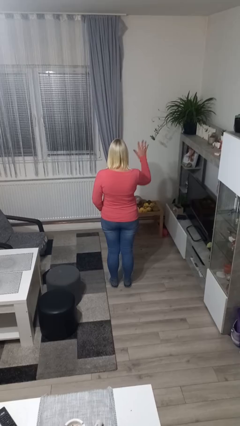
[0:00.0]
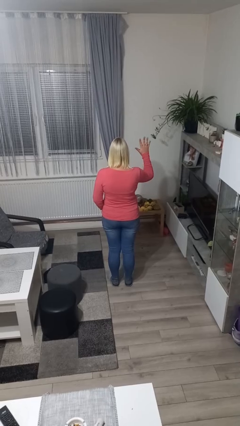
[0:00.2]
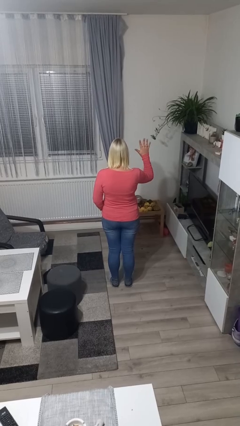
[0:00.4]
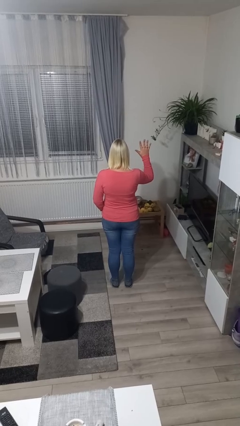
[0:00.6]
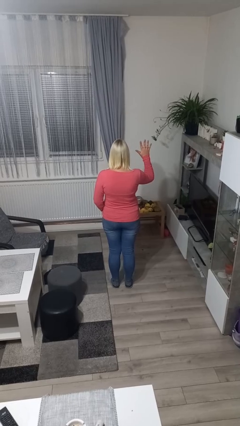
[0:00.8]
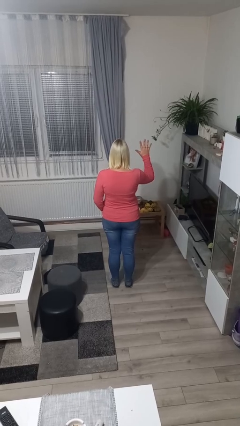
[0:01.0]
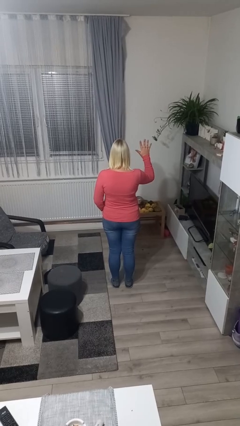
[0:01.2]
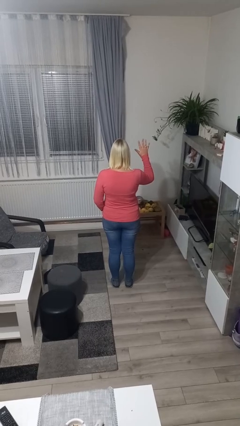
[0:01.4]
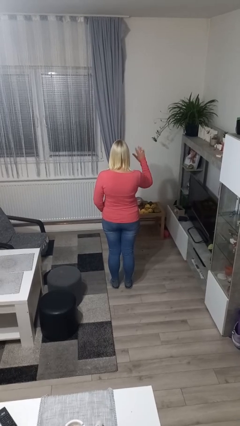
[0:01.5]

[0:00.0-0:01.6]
person gestures number five

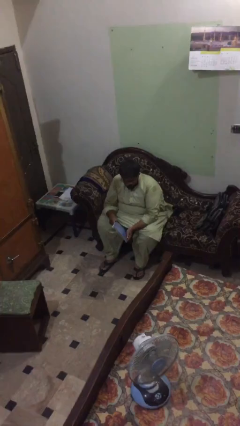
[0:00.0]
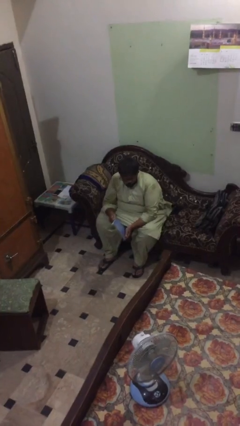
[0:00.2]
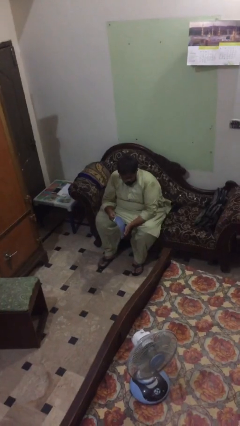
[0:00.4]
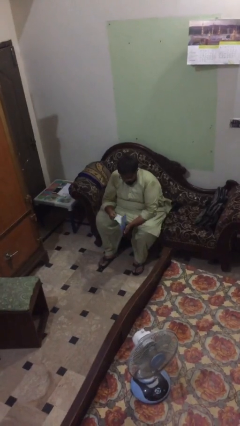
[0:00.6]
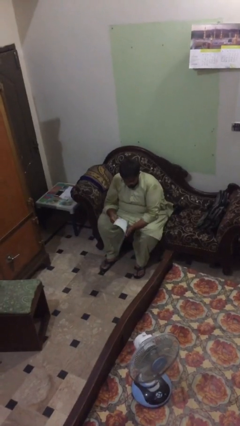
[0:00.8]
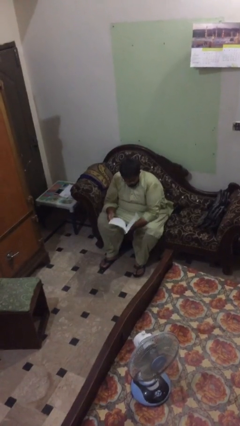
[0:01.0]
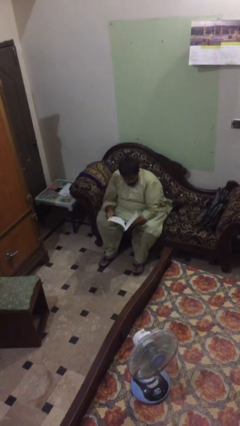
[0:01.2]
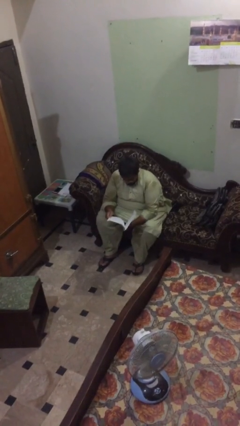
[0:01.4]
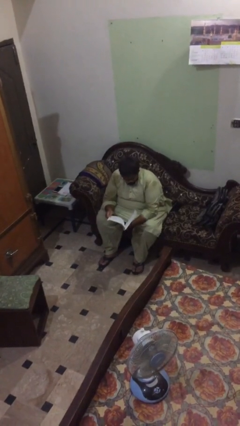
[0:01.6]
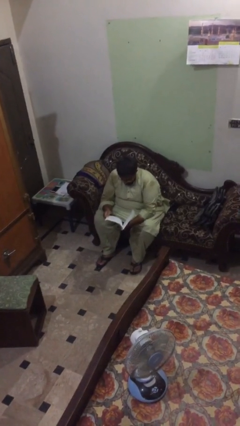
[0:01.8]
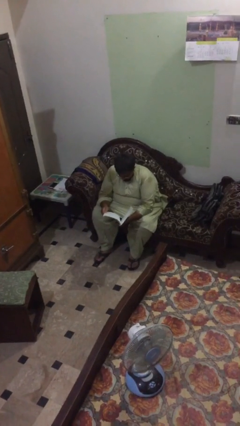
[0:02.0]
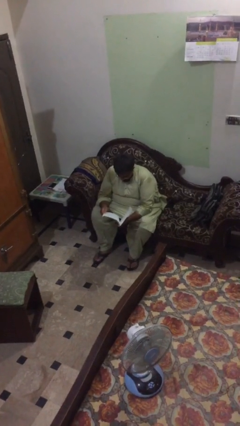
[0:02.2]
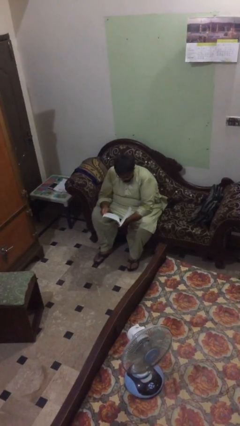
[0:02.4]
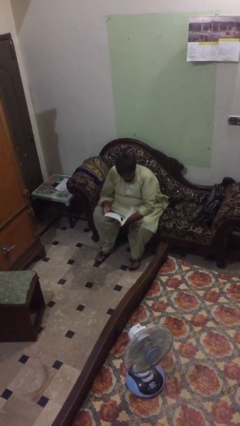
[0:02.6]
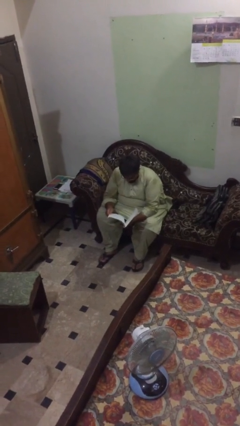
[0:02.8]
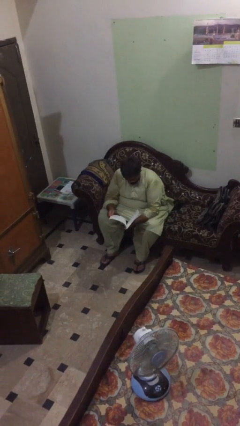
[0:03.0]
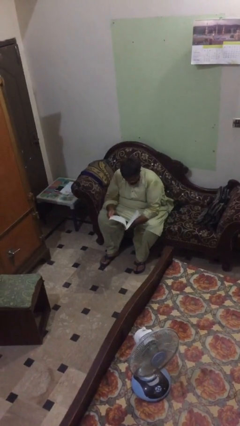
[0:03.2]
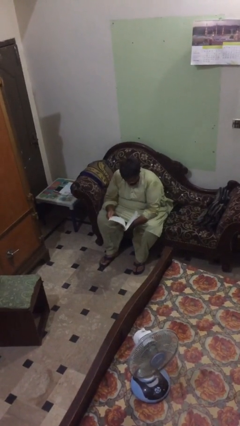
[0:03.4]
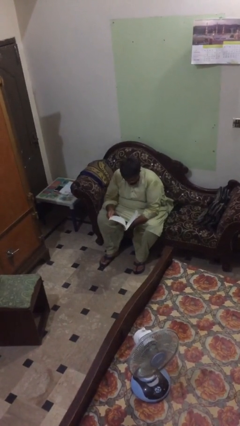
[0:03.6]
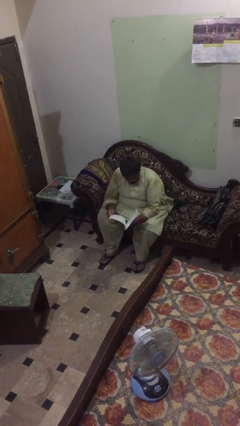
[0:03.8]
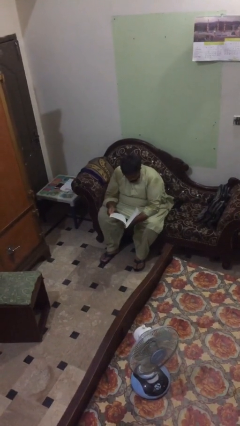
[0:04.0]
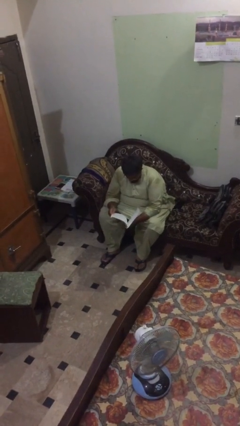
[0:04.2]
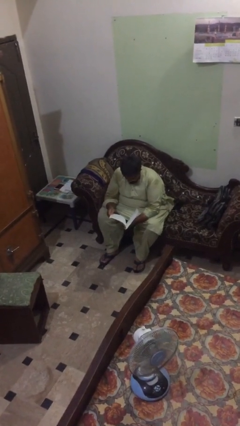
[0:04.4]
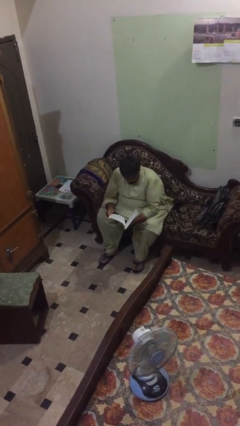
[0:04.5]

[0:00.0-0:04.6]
person talks on phone

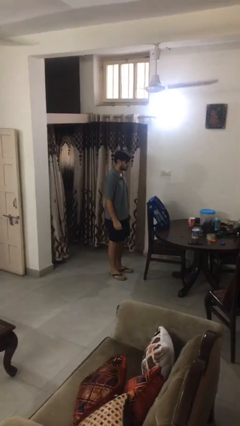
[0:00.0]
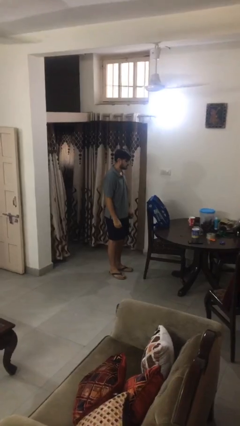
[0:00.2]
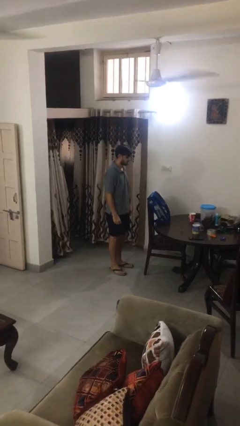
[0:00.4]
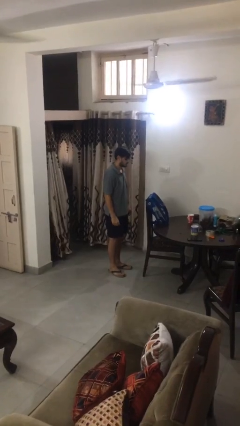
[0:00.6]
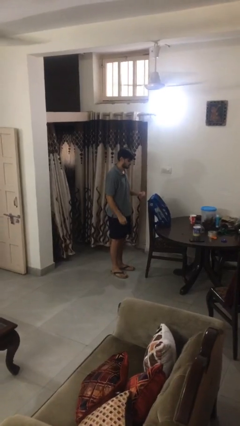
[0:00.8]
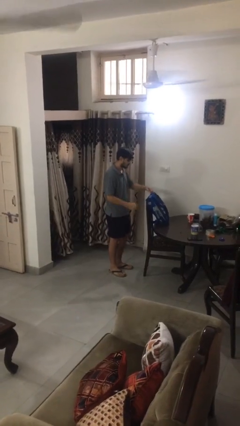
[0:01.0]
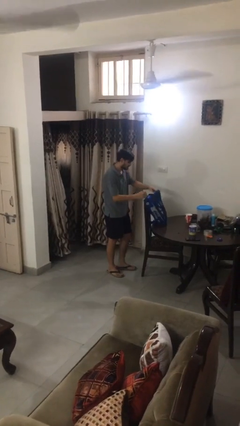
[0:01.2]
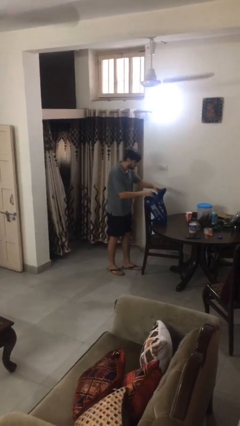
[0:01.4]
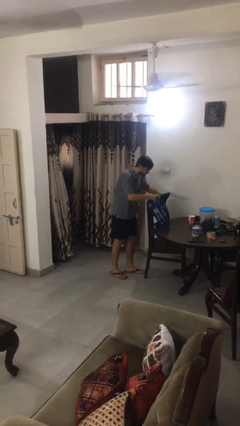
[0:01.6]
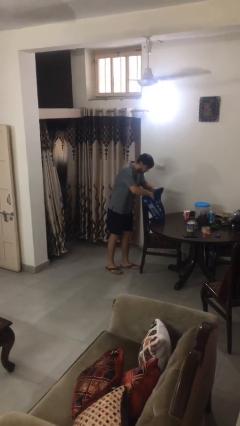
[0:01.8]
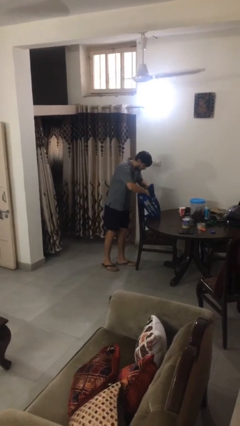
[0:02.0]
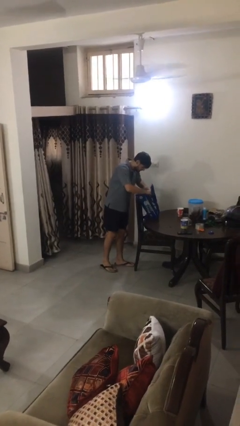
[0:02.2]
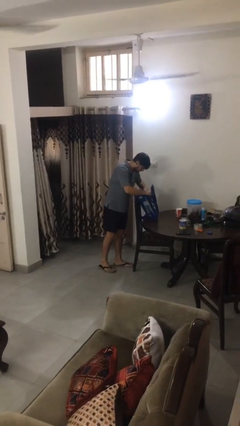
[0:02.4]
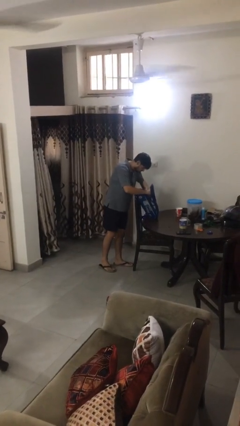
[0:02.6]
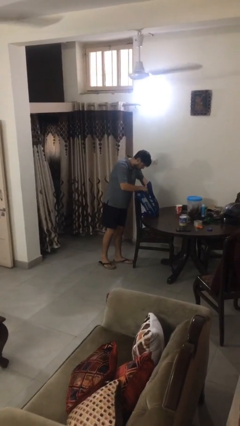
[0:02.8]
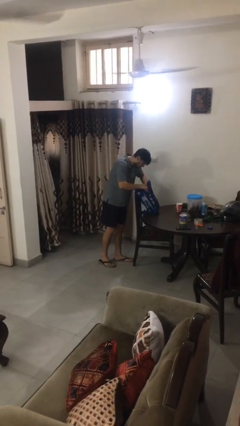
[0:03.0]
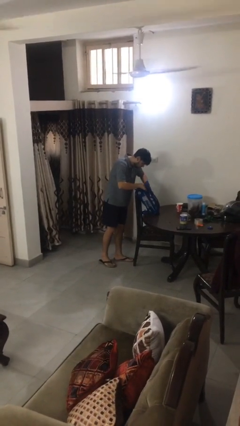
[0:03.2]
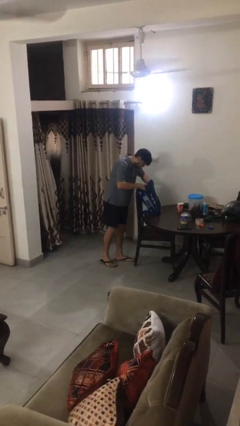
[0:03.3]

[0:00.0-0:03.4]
person searches in backpack

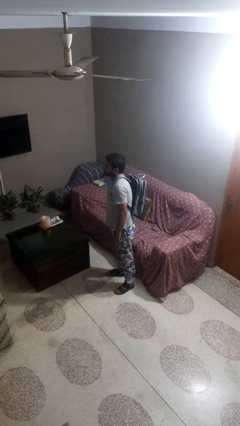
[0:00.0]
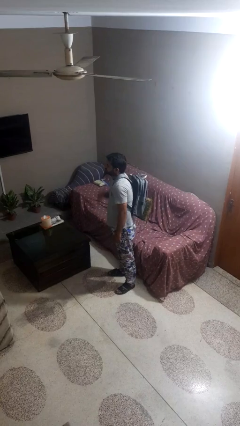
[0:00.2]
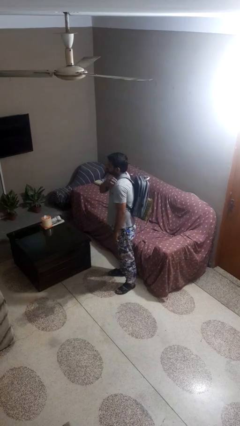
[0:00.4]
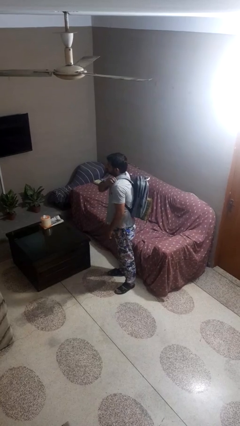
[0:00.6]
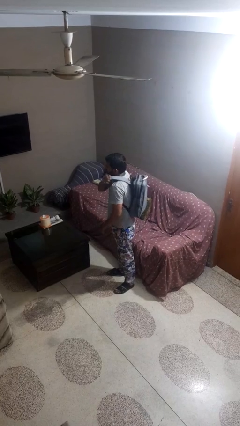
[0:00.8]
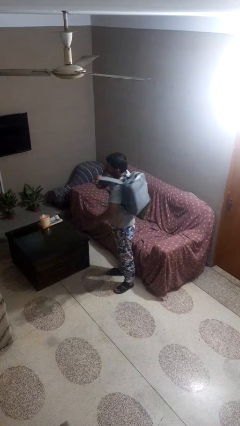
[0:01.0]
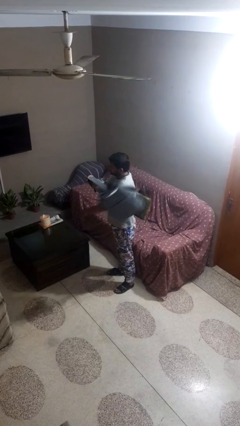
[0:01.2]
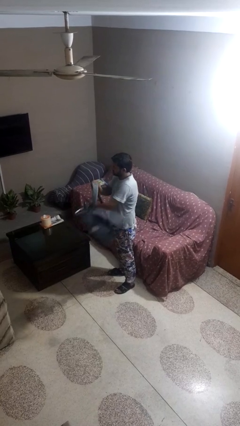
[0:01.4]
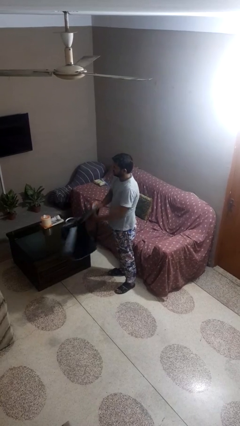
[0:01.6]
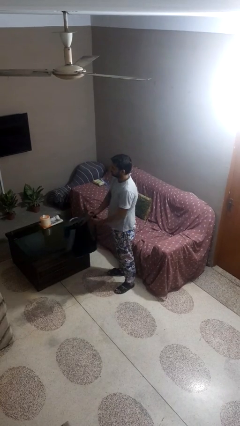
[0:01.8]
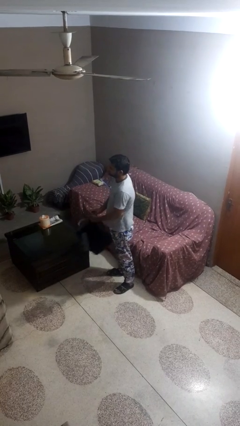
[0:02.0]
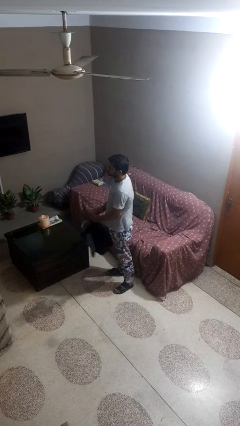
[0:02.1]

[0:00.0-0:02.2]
person takes off backpack

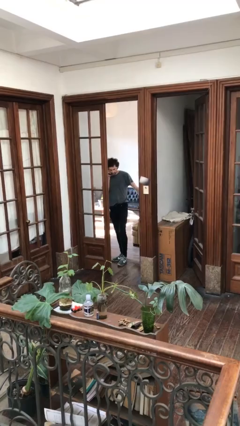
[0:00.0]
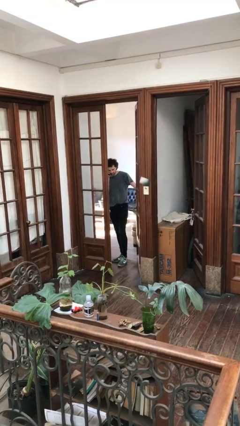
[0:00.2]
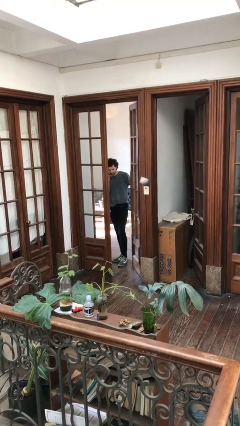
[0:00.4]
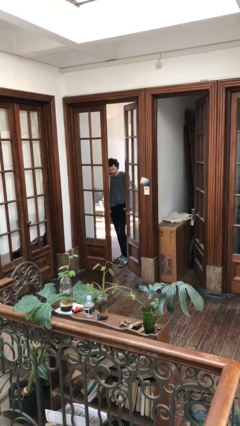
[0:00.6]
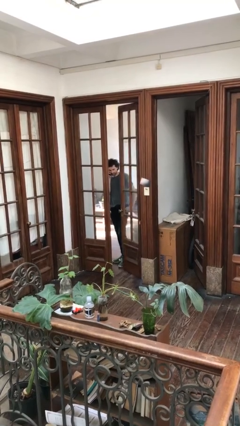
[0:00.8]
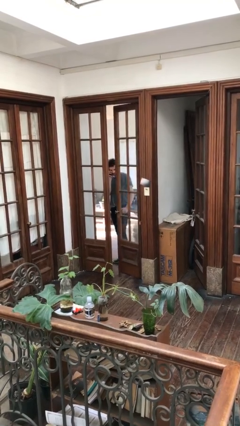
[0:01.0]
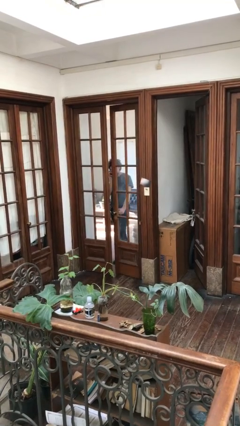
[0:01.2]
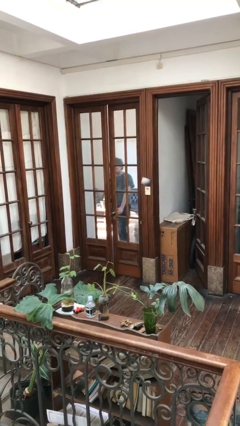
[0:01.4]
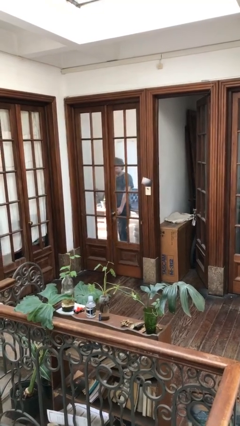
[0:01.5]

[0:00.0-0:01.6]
person closes facility door

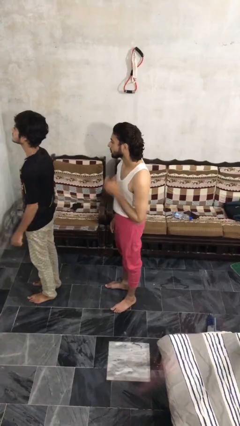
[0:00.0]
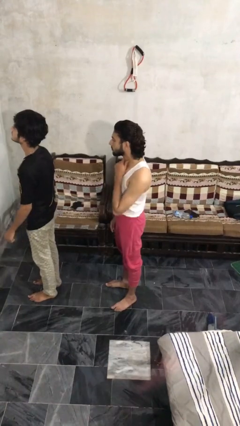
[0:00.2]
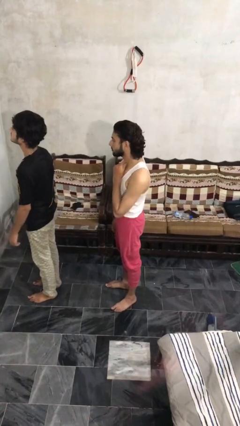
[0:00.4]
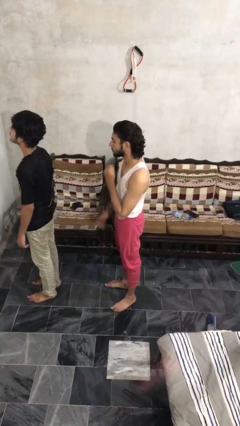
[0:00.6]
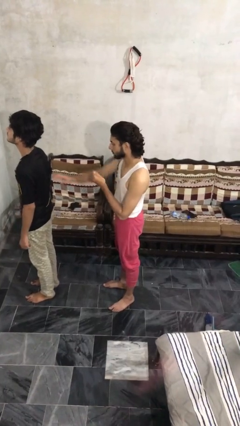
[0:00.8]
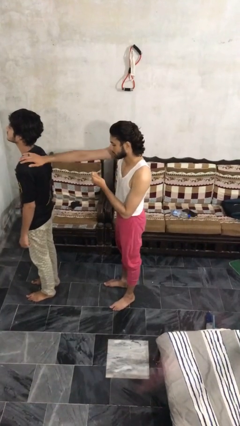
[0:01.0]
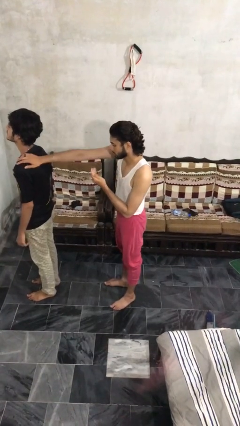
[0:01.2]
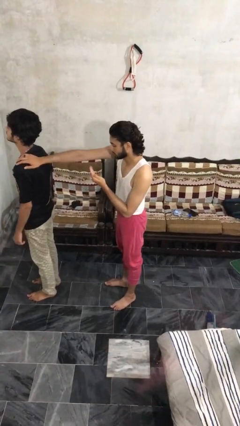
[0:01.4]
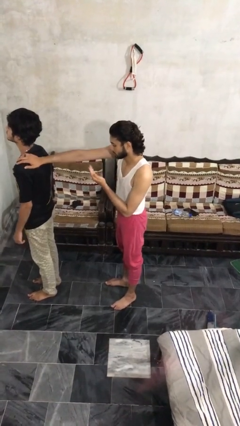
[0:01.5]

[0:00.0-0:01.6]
person grabs person by shoulder

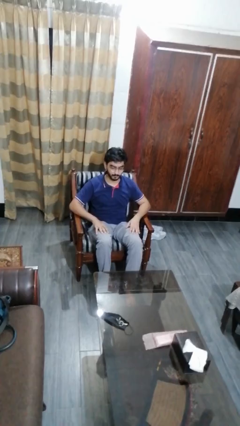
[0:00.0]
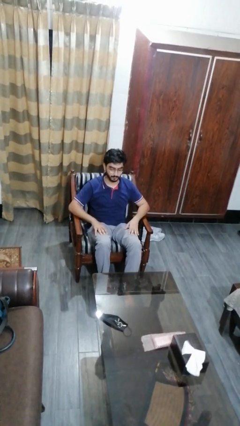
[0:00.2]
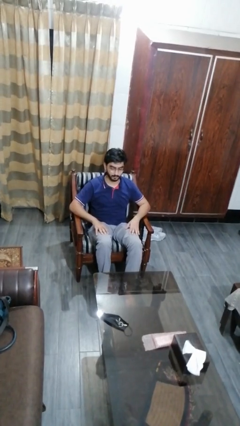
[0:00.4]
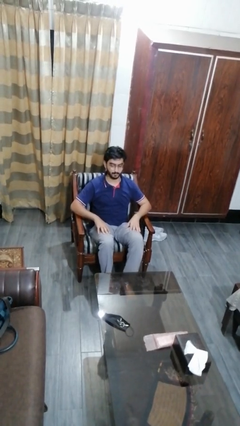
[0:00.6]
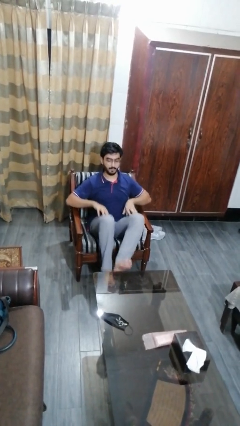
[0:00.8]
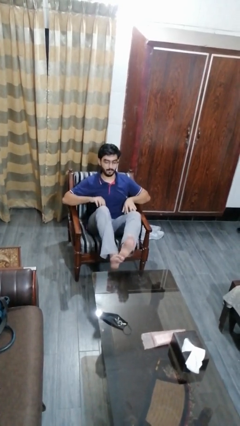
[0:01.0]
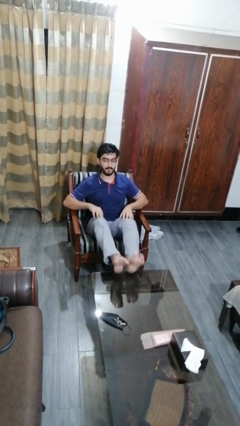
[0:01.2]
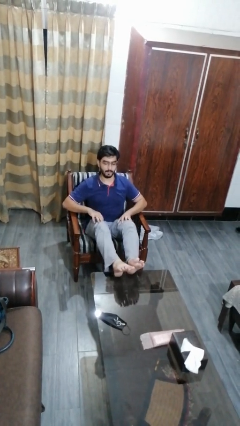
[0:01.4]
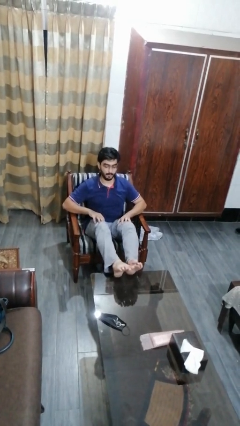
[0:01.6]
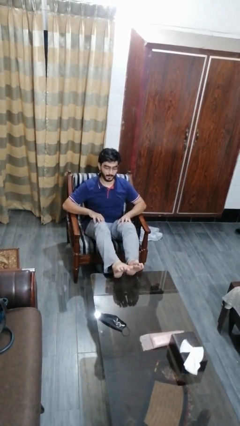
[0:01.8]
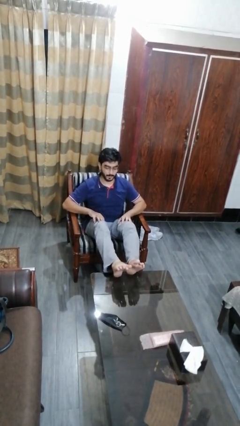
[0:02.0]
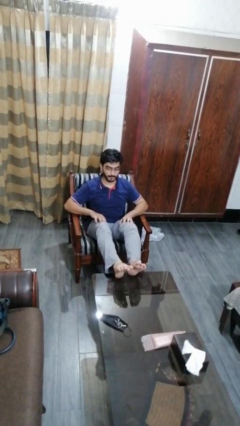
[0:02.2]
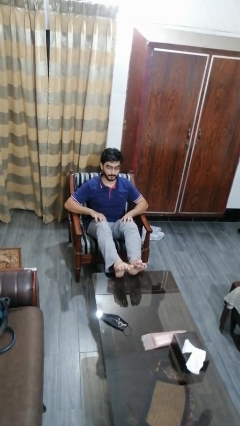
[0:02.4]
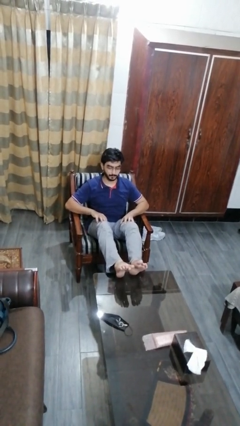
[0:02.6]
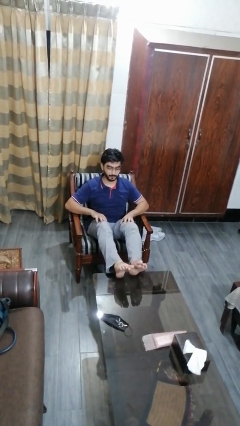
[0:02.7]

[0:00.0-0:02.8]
person puts feet up
